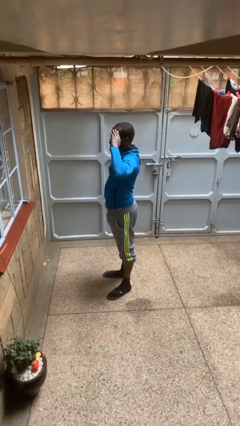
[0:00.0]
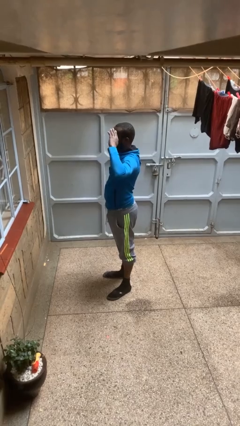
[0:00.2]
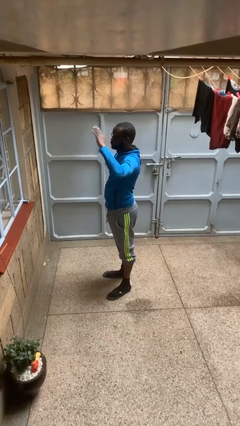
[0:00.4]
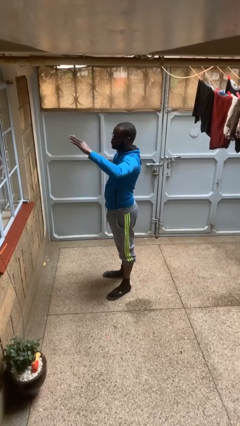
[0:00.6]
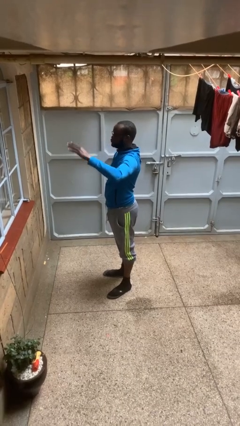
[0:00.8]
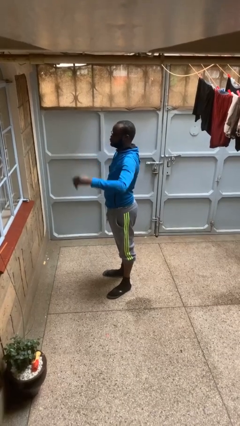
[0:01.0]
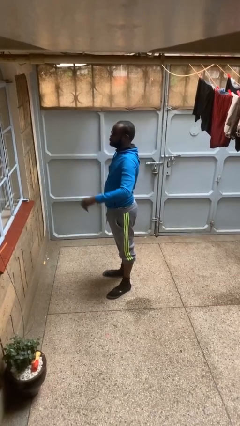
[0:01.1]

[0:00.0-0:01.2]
person salutes

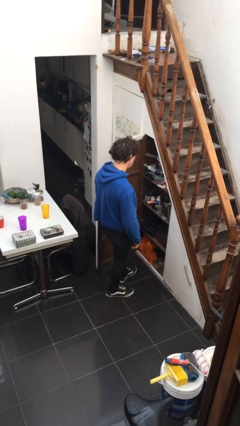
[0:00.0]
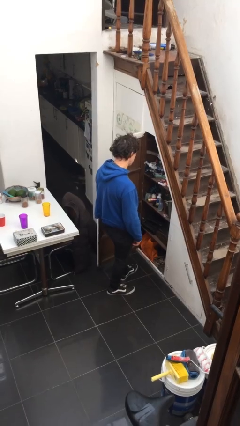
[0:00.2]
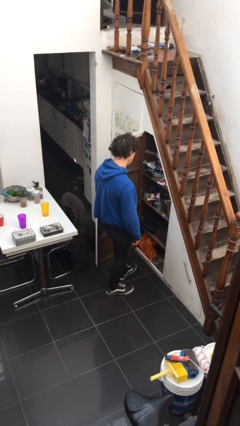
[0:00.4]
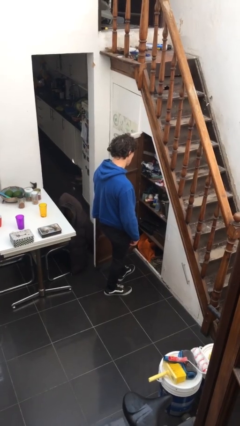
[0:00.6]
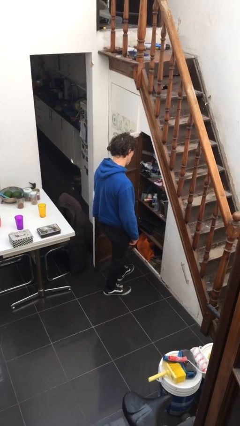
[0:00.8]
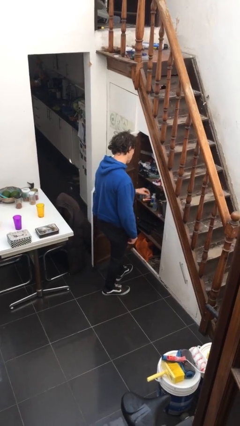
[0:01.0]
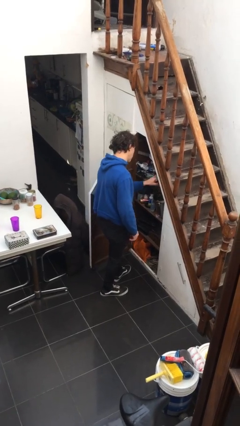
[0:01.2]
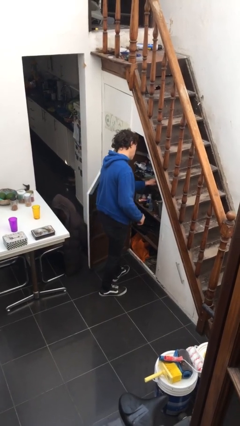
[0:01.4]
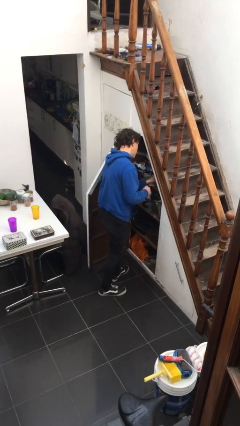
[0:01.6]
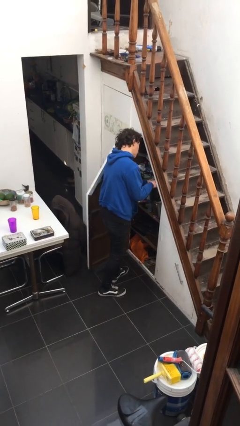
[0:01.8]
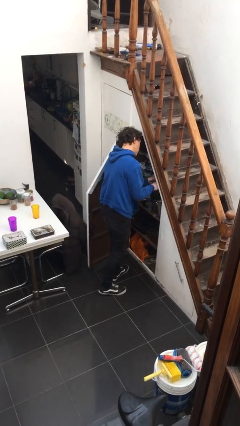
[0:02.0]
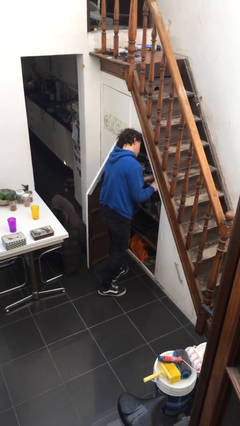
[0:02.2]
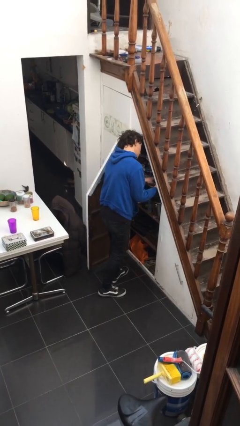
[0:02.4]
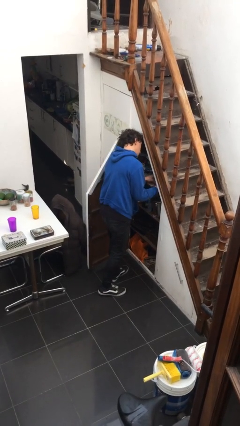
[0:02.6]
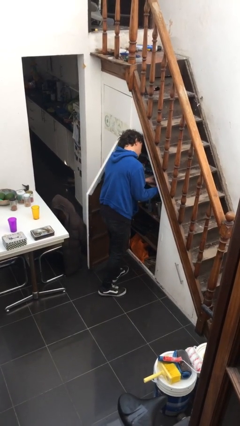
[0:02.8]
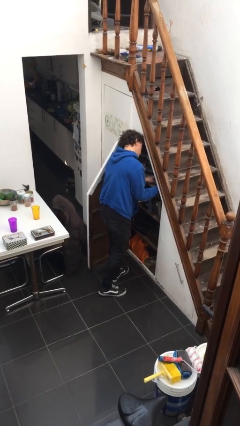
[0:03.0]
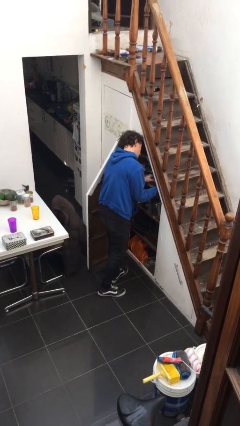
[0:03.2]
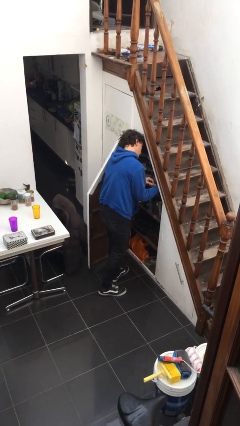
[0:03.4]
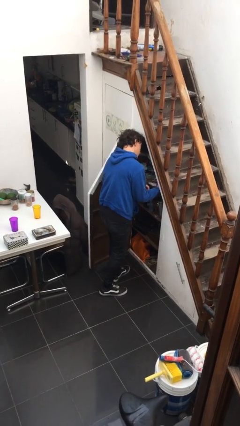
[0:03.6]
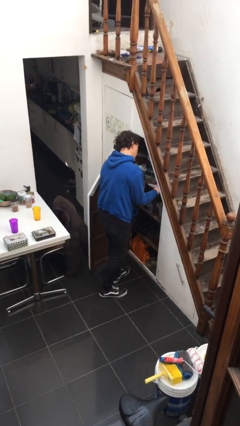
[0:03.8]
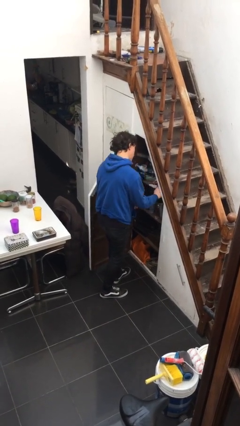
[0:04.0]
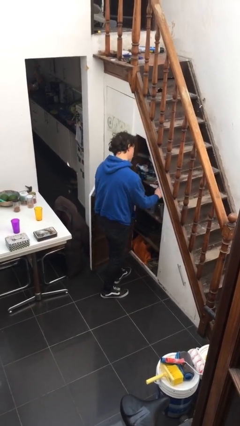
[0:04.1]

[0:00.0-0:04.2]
person searches in cabinet

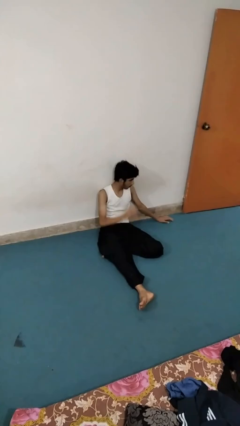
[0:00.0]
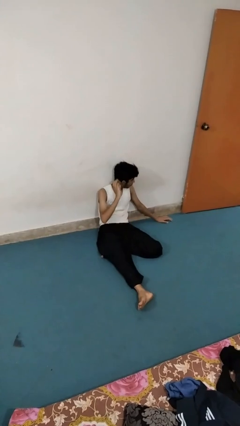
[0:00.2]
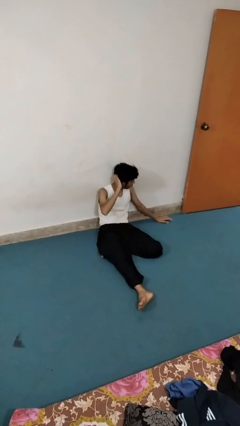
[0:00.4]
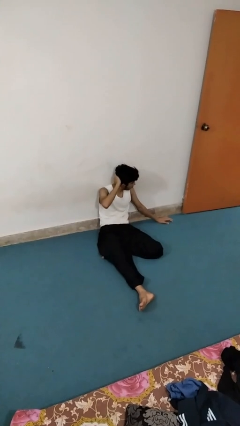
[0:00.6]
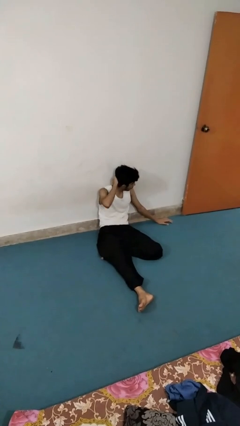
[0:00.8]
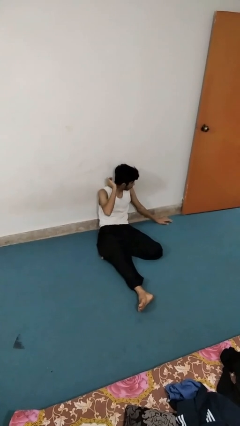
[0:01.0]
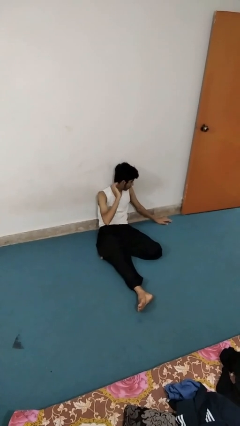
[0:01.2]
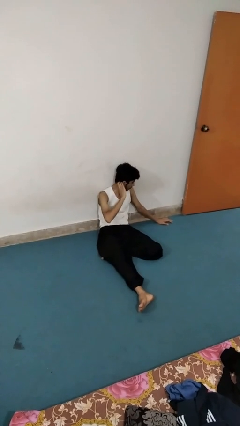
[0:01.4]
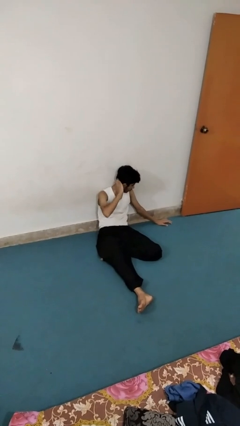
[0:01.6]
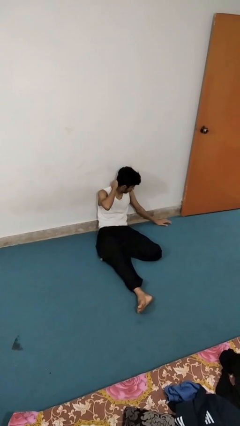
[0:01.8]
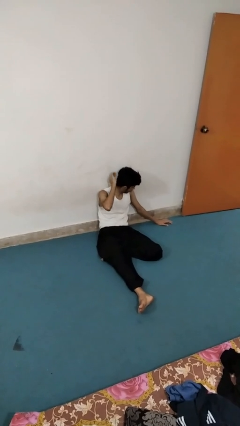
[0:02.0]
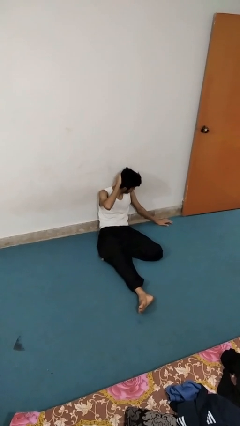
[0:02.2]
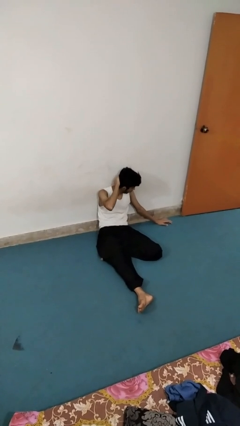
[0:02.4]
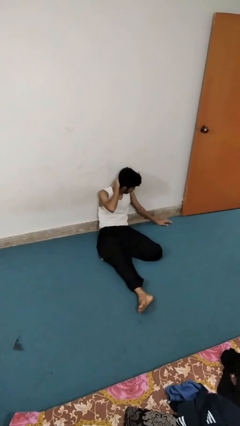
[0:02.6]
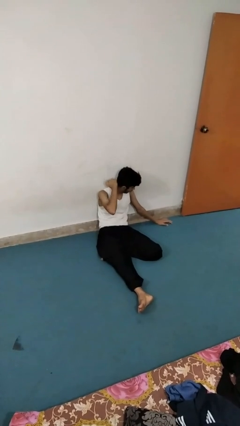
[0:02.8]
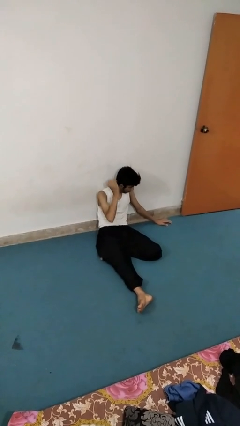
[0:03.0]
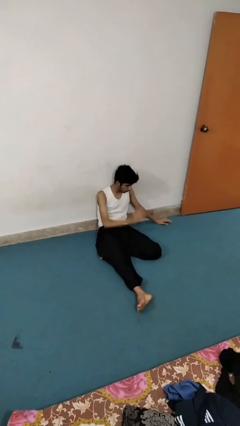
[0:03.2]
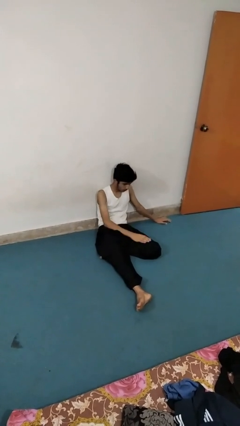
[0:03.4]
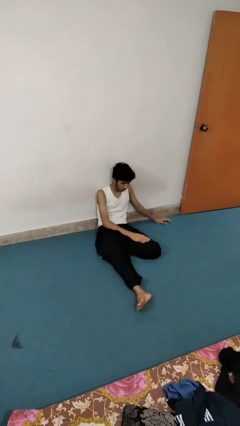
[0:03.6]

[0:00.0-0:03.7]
person strokes hair

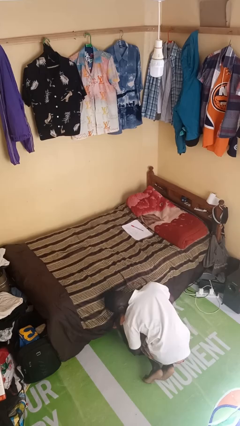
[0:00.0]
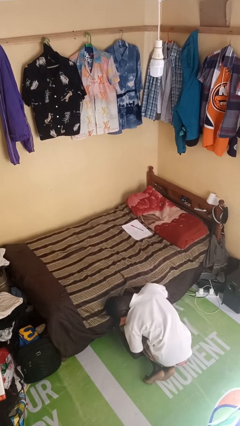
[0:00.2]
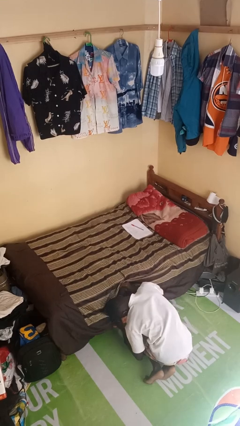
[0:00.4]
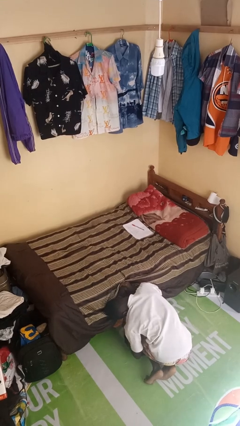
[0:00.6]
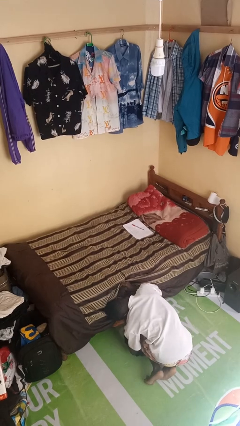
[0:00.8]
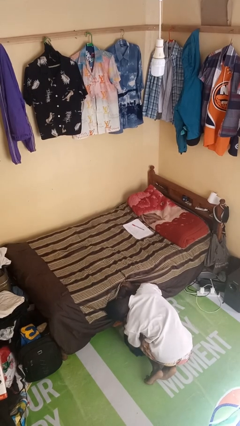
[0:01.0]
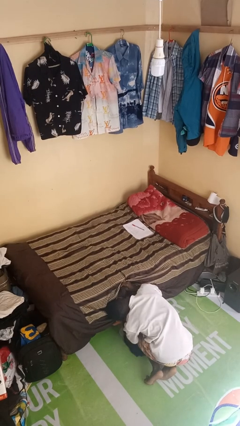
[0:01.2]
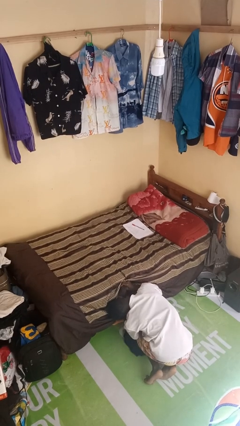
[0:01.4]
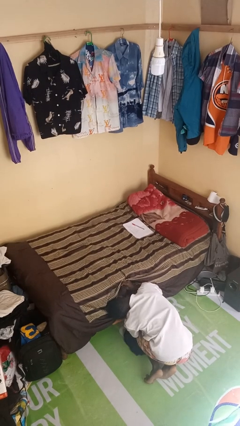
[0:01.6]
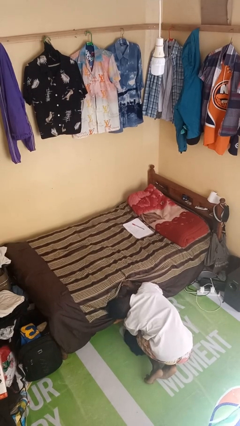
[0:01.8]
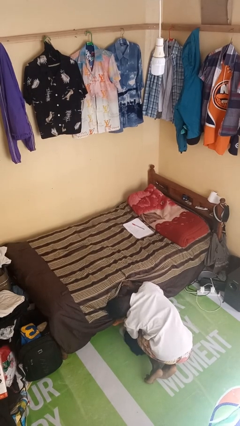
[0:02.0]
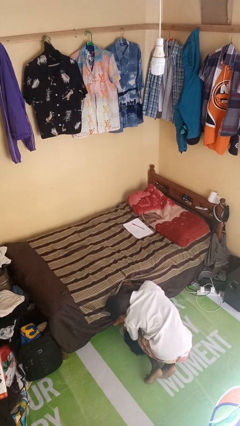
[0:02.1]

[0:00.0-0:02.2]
person searches under bed

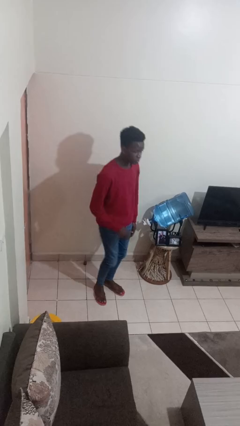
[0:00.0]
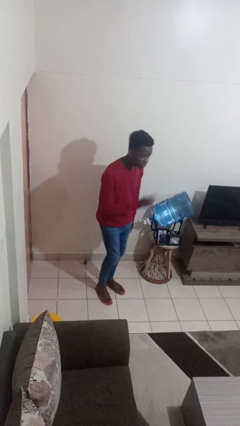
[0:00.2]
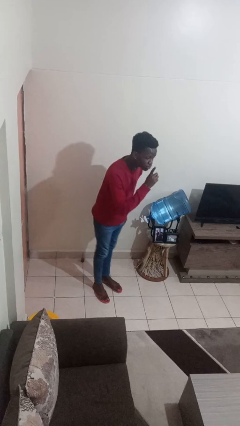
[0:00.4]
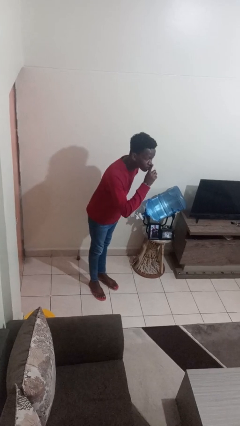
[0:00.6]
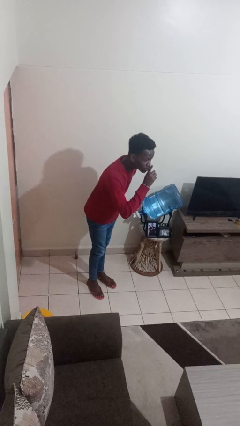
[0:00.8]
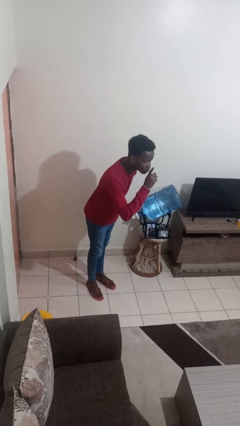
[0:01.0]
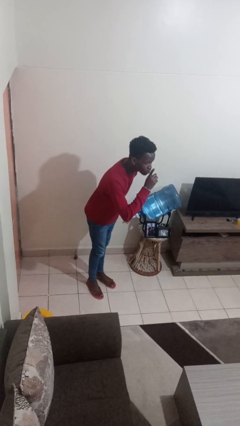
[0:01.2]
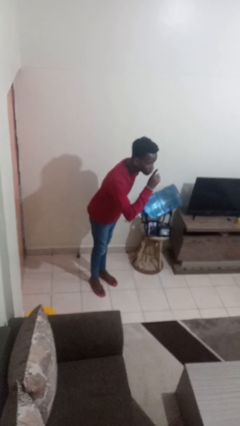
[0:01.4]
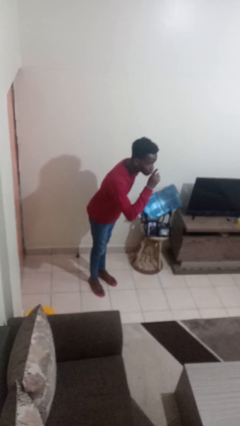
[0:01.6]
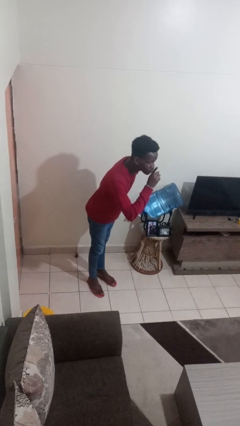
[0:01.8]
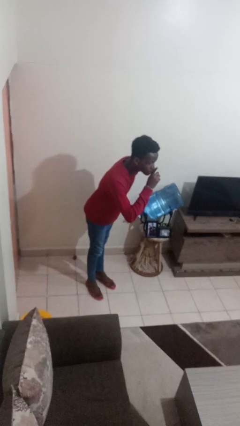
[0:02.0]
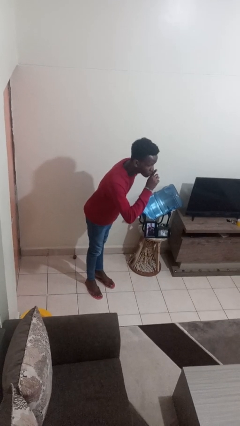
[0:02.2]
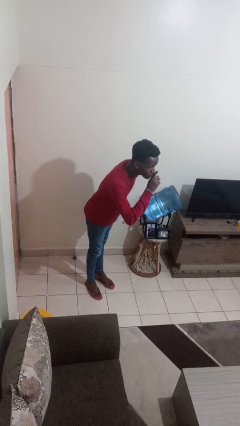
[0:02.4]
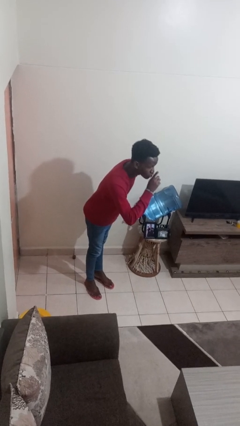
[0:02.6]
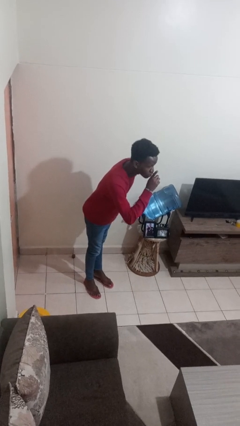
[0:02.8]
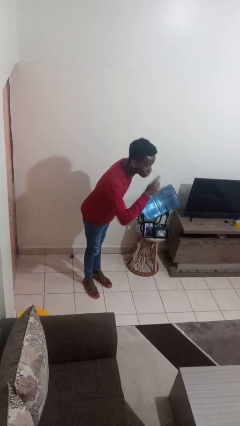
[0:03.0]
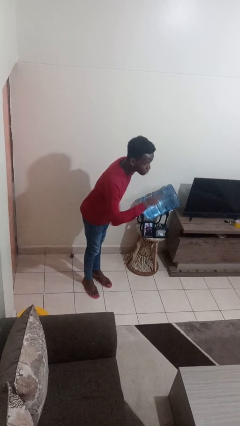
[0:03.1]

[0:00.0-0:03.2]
person gestures be quiet

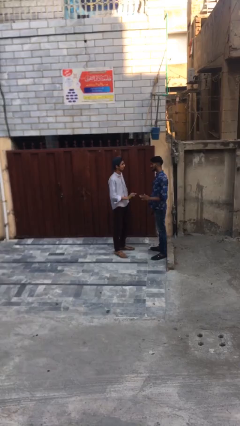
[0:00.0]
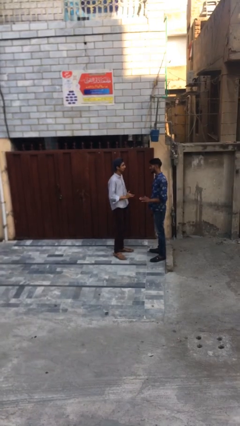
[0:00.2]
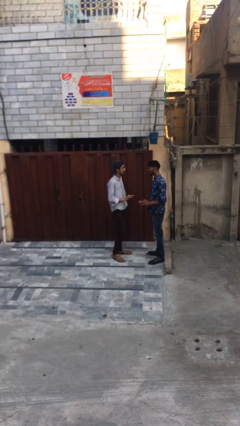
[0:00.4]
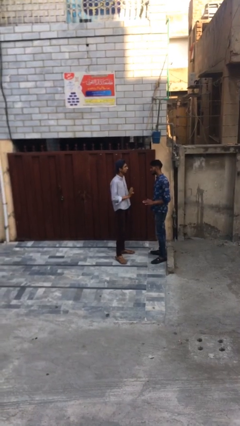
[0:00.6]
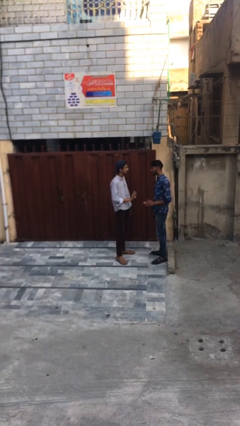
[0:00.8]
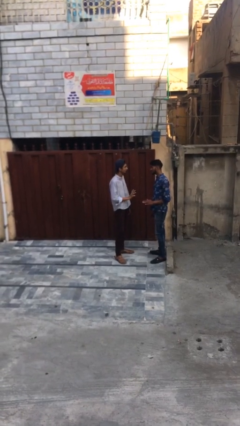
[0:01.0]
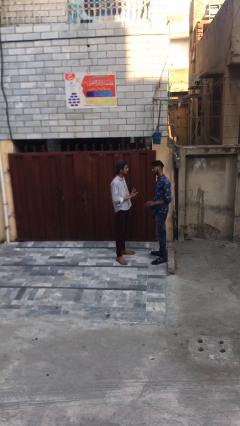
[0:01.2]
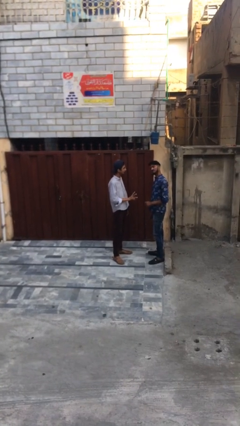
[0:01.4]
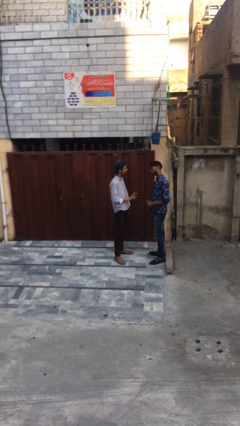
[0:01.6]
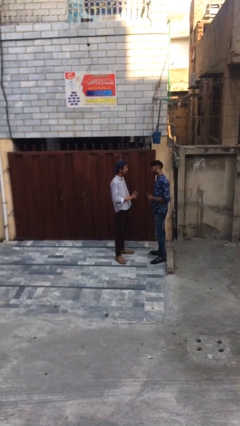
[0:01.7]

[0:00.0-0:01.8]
person talks to person

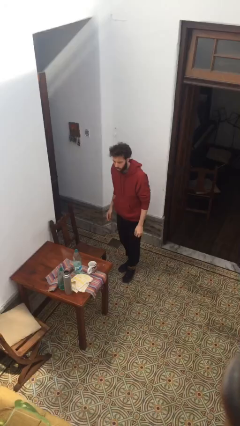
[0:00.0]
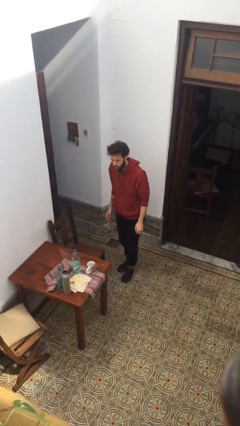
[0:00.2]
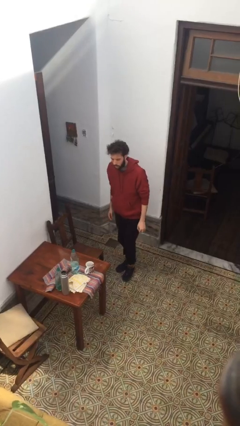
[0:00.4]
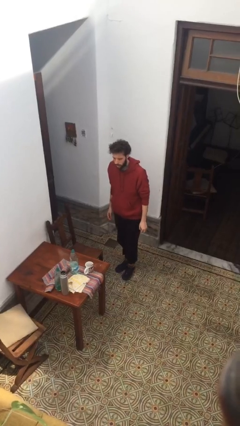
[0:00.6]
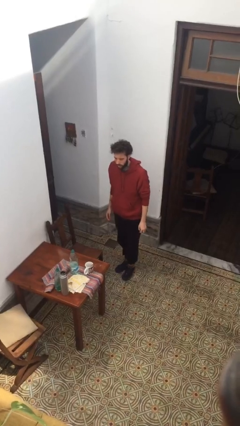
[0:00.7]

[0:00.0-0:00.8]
person climbs off table

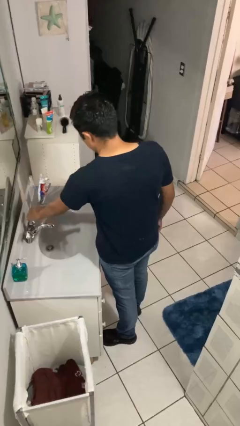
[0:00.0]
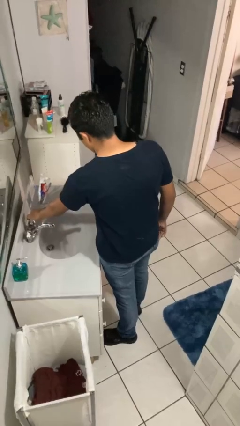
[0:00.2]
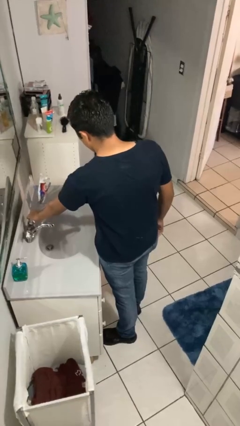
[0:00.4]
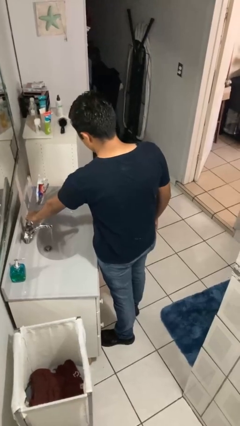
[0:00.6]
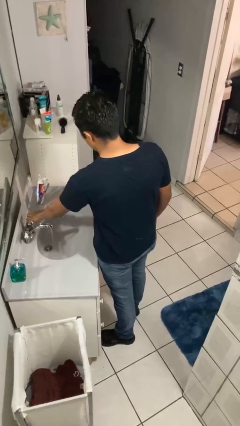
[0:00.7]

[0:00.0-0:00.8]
person turns on faucet
